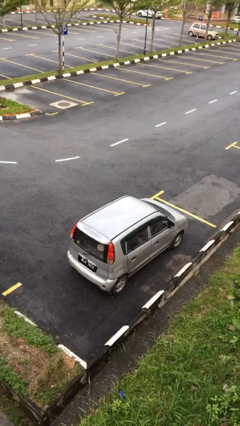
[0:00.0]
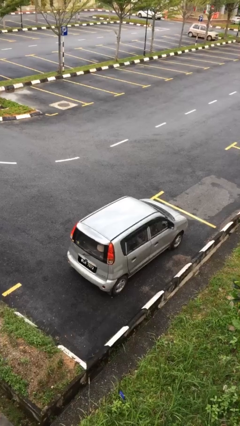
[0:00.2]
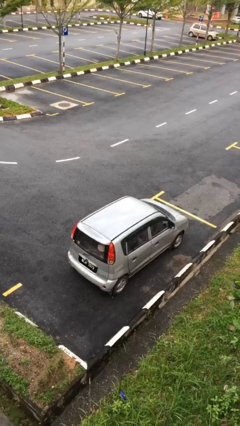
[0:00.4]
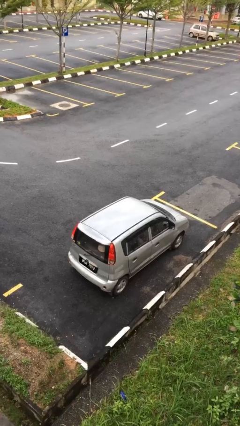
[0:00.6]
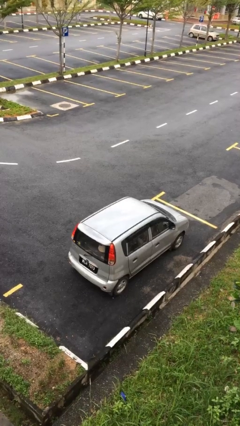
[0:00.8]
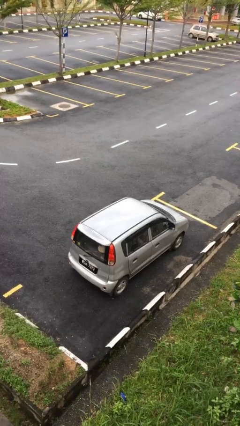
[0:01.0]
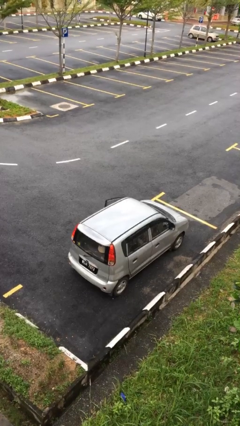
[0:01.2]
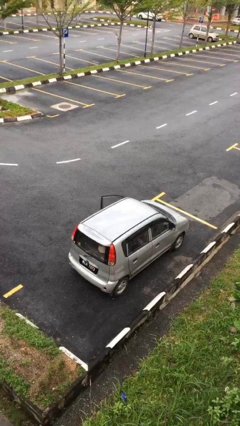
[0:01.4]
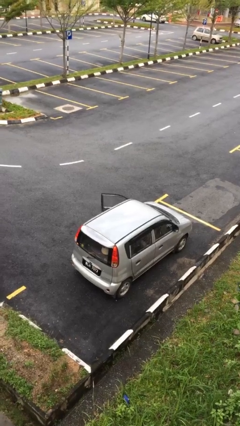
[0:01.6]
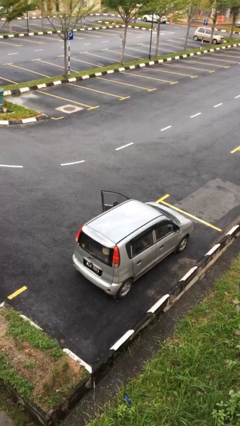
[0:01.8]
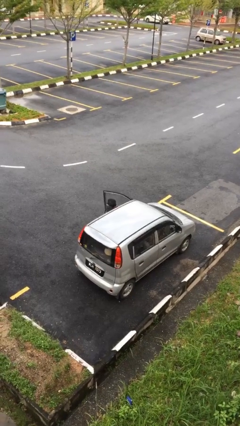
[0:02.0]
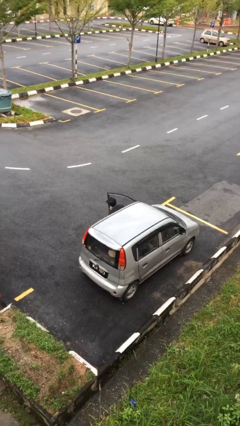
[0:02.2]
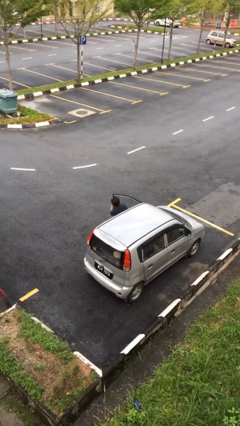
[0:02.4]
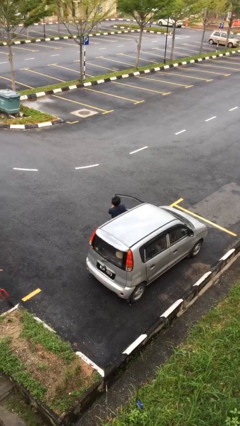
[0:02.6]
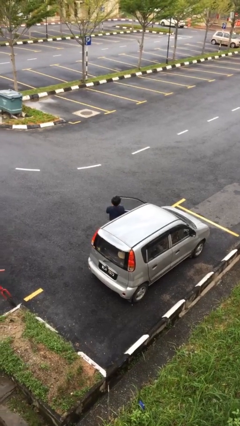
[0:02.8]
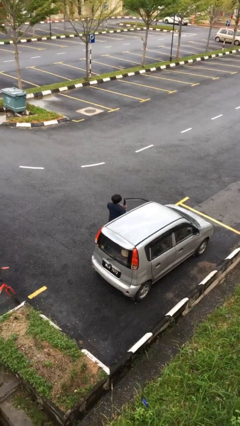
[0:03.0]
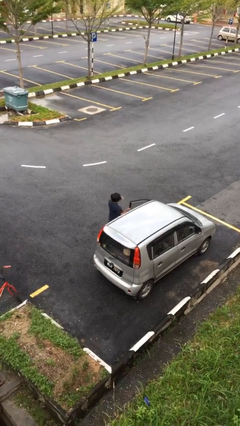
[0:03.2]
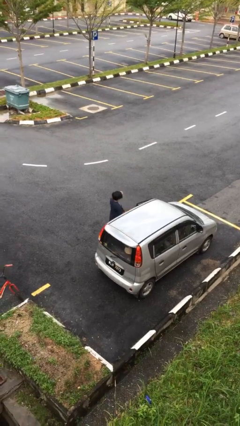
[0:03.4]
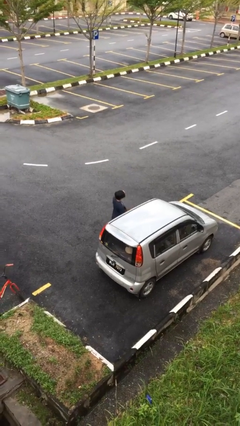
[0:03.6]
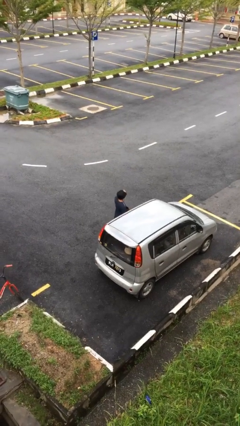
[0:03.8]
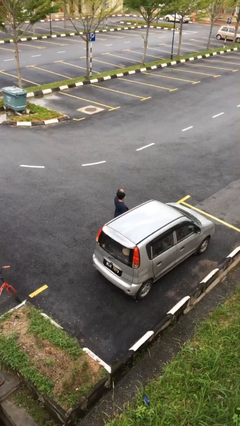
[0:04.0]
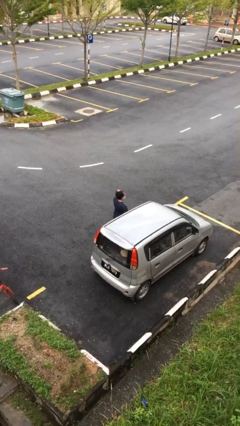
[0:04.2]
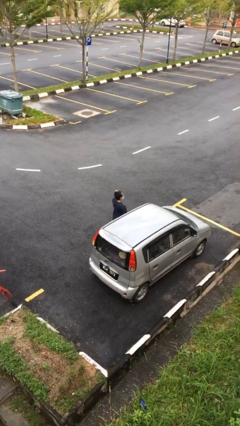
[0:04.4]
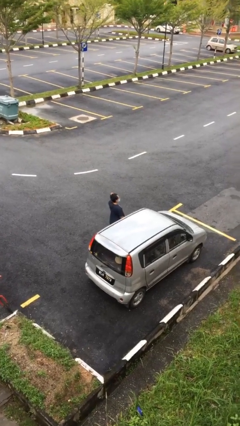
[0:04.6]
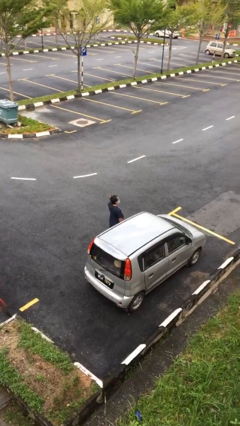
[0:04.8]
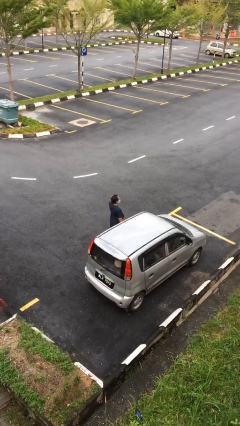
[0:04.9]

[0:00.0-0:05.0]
person exits car

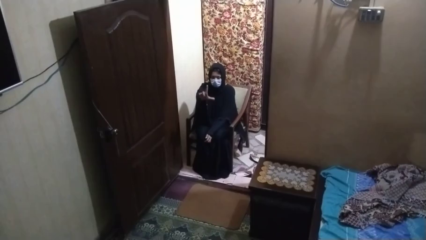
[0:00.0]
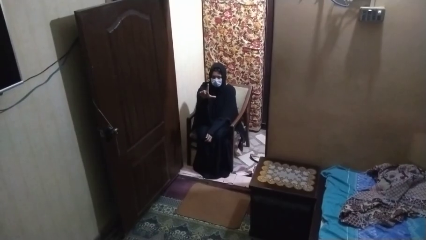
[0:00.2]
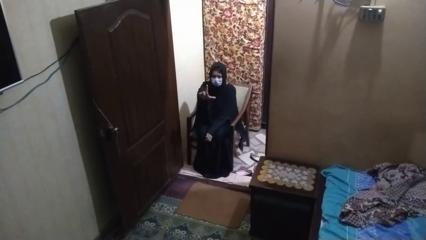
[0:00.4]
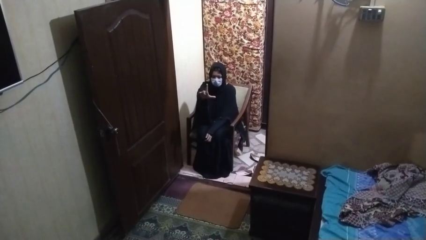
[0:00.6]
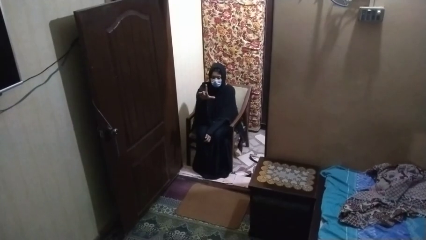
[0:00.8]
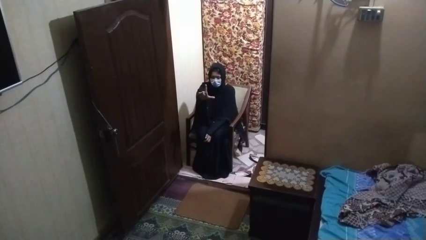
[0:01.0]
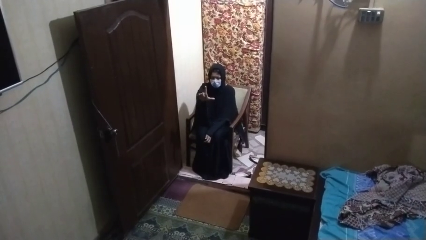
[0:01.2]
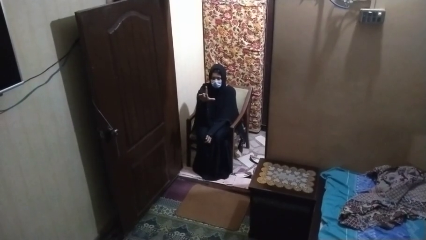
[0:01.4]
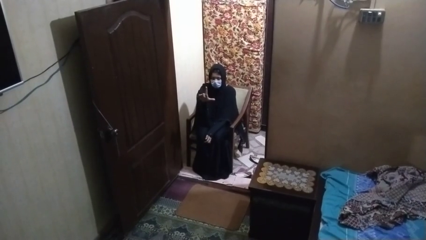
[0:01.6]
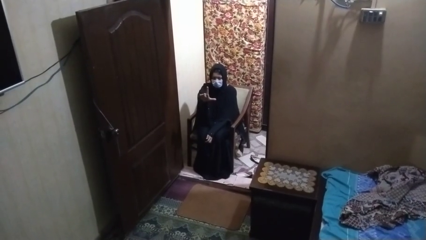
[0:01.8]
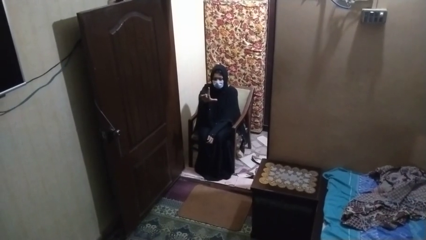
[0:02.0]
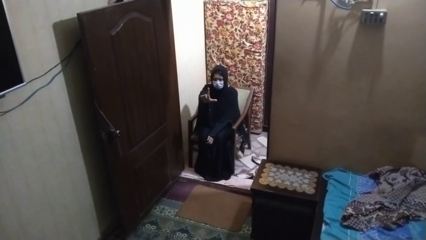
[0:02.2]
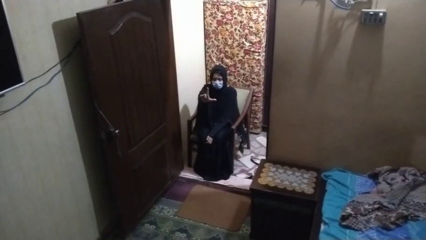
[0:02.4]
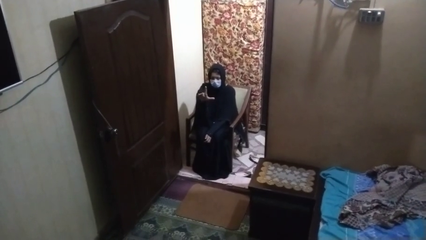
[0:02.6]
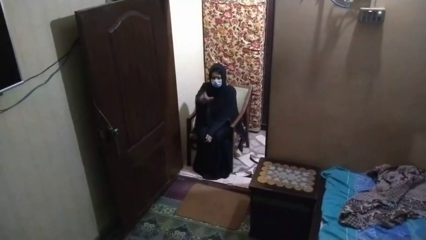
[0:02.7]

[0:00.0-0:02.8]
person gestures zoom in

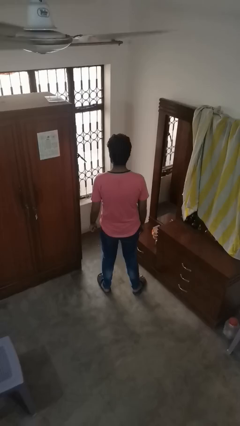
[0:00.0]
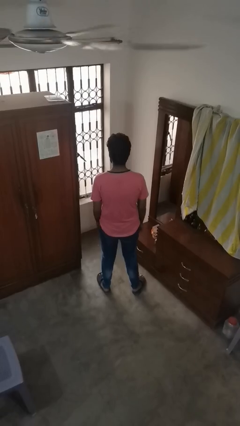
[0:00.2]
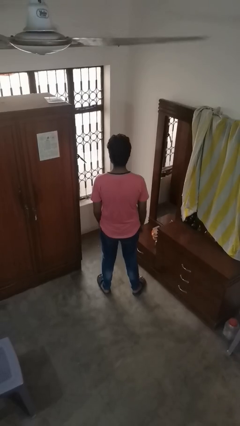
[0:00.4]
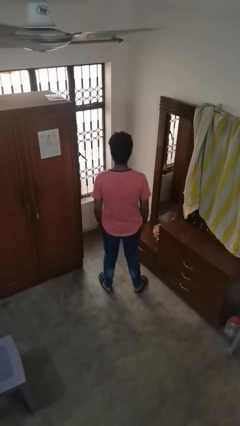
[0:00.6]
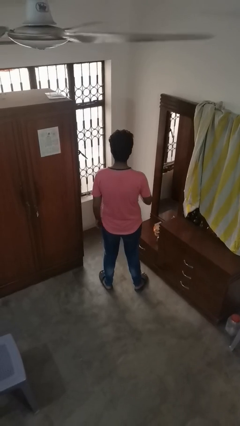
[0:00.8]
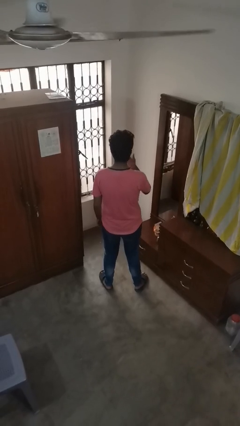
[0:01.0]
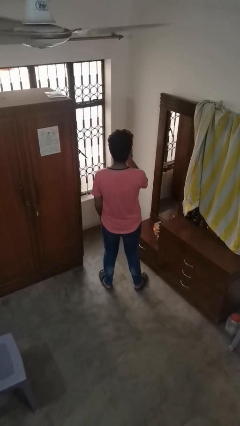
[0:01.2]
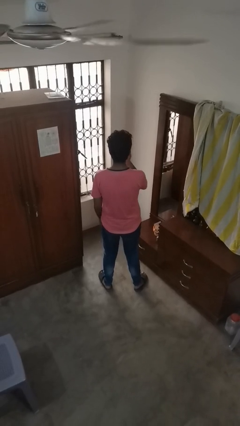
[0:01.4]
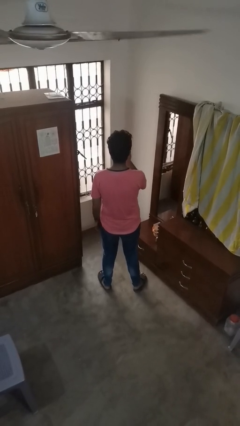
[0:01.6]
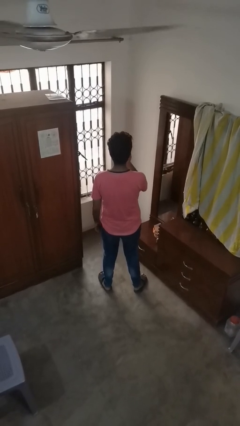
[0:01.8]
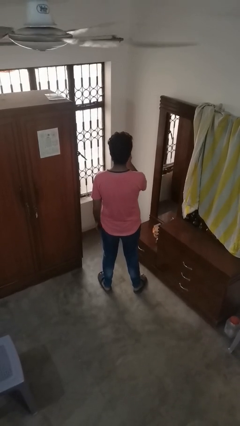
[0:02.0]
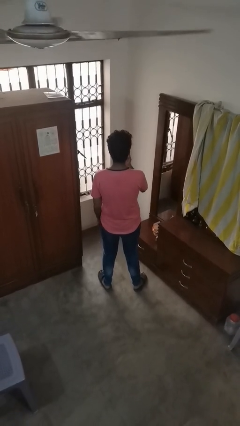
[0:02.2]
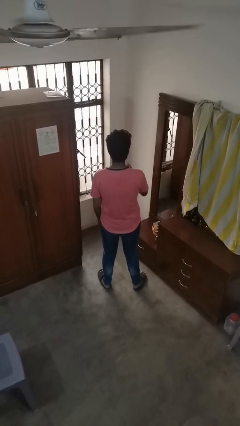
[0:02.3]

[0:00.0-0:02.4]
person licks fingers

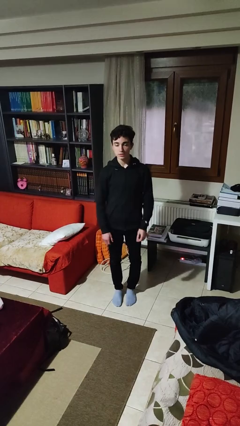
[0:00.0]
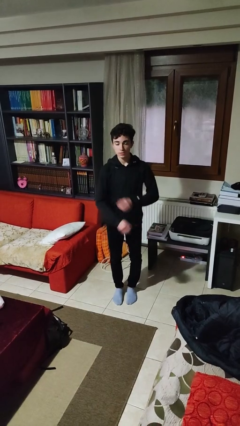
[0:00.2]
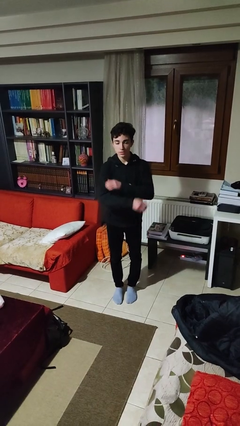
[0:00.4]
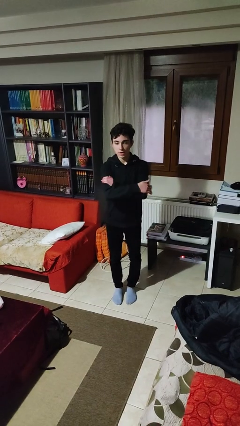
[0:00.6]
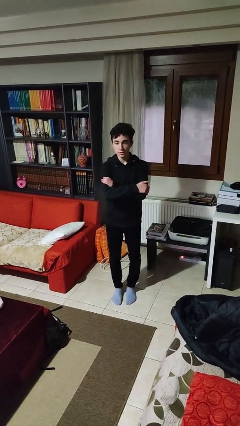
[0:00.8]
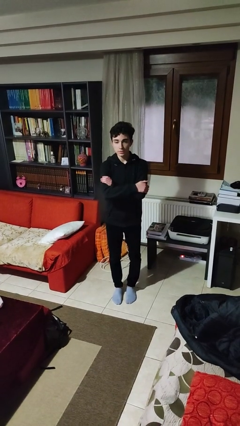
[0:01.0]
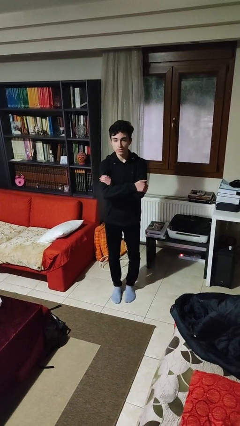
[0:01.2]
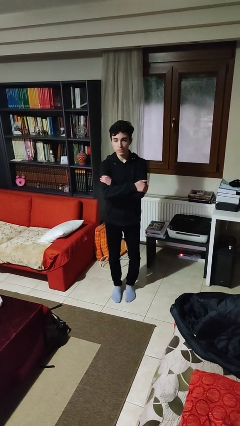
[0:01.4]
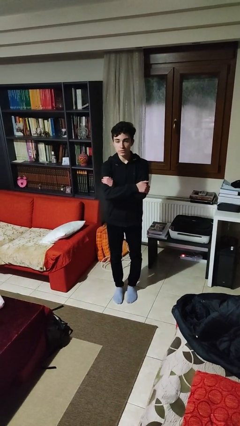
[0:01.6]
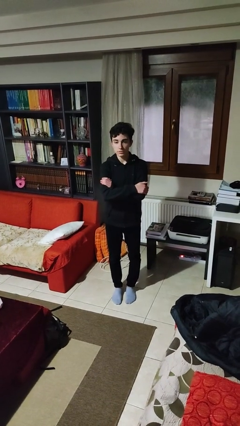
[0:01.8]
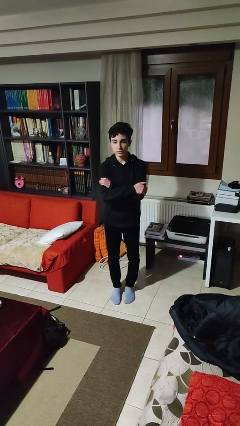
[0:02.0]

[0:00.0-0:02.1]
person crosses arms

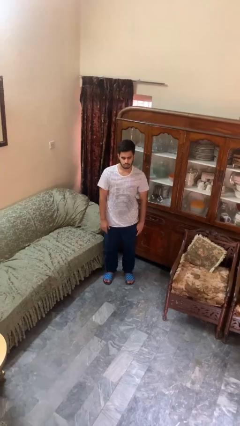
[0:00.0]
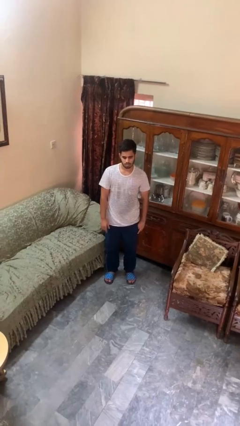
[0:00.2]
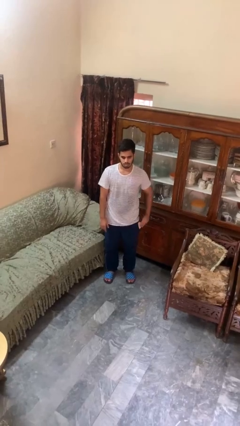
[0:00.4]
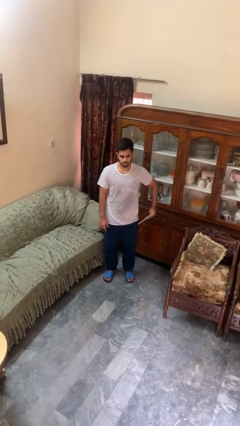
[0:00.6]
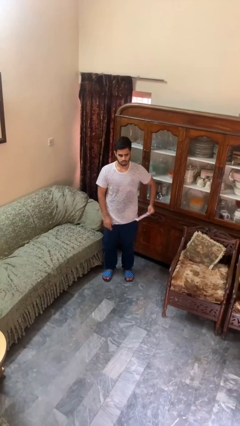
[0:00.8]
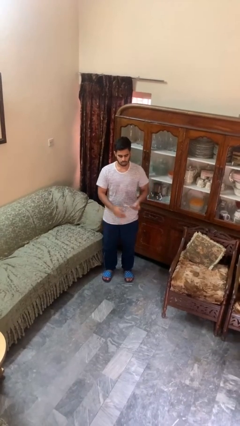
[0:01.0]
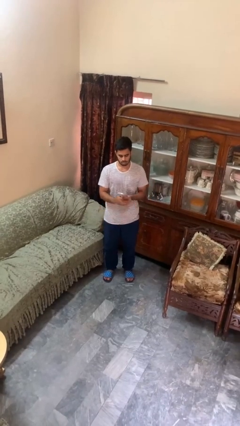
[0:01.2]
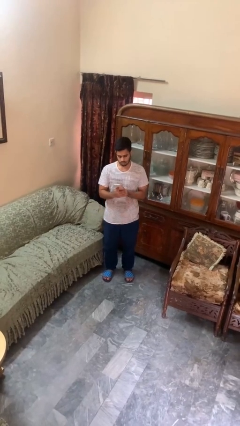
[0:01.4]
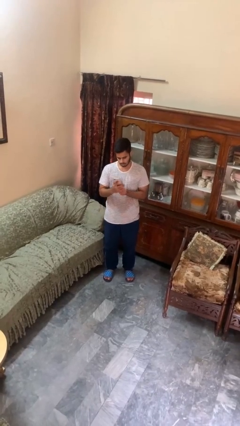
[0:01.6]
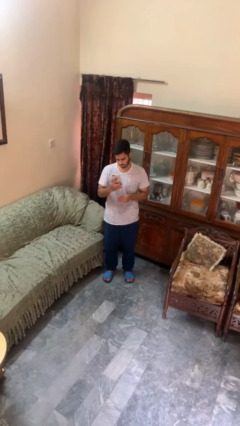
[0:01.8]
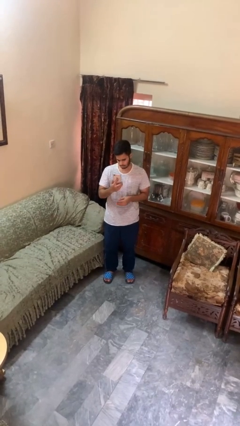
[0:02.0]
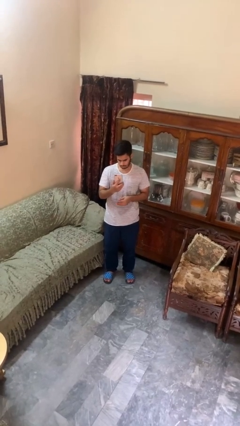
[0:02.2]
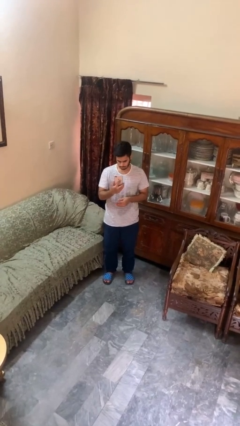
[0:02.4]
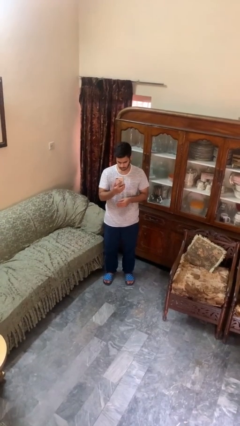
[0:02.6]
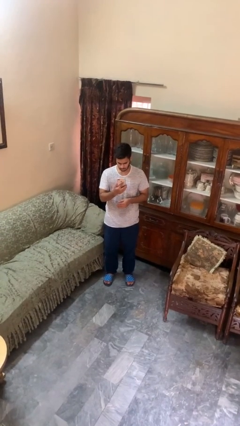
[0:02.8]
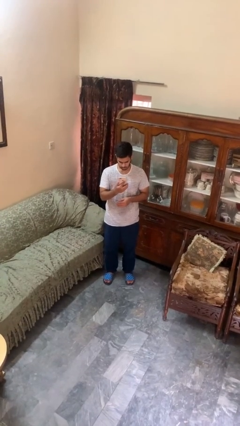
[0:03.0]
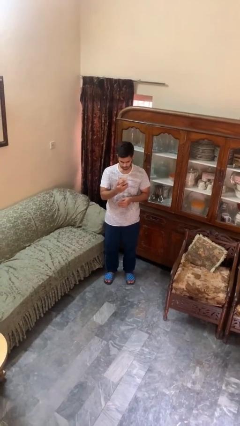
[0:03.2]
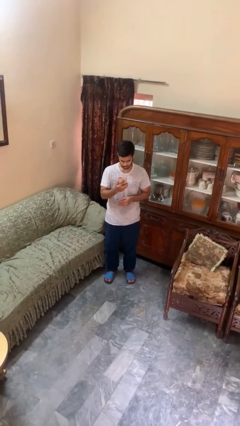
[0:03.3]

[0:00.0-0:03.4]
person takes phone from pocket

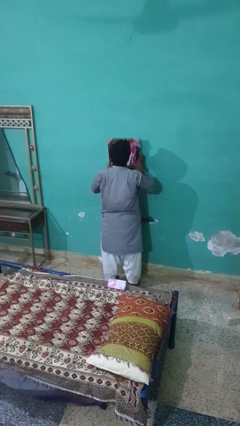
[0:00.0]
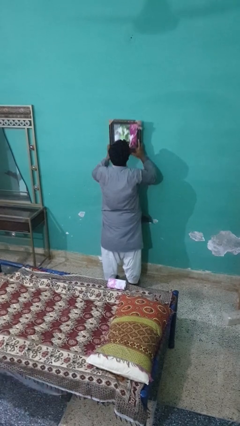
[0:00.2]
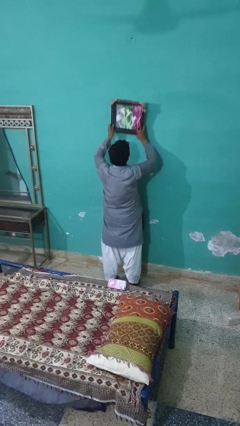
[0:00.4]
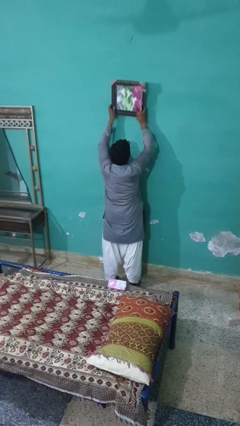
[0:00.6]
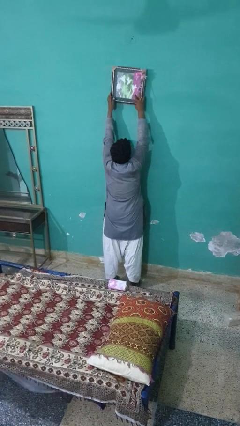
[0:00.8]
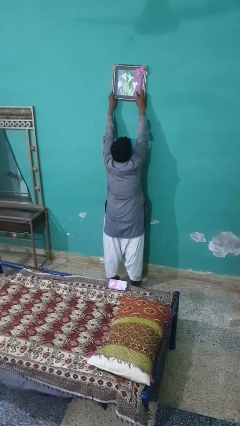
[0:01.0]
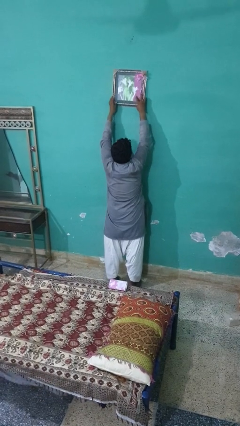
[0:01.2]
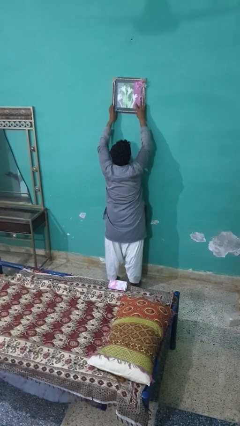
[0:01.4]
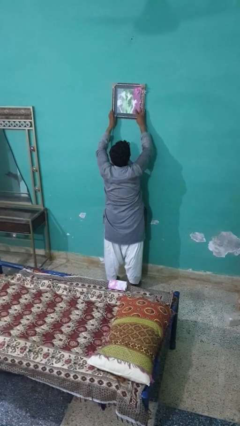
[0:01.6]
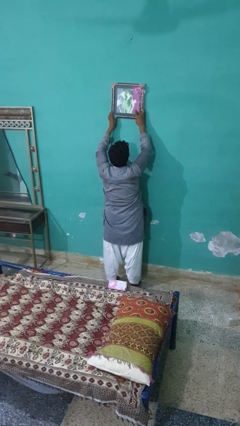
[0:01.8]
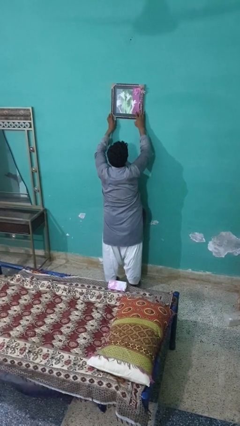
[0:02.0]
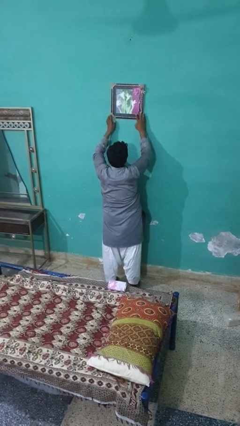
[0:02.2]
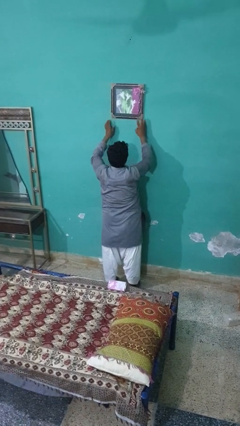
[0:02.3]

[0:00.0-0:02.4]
person puts up picture frame
